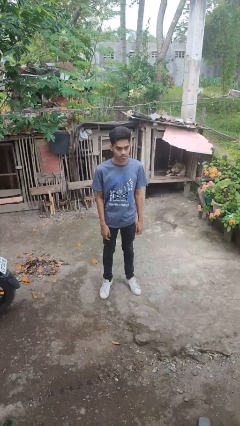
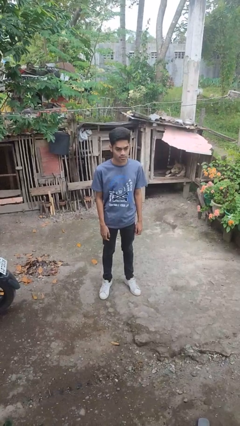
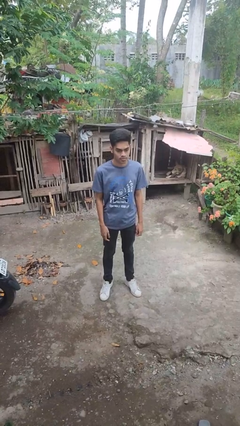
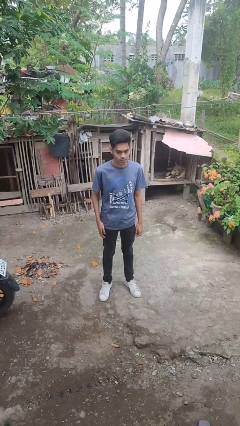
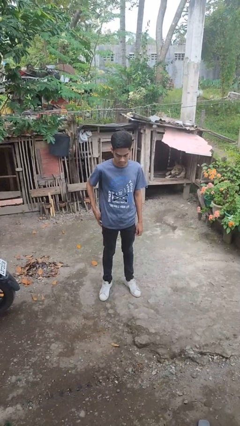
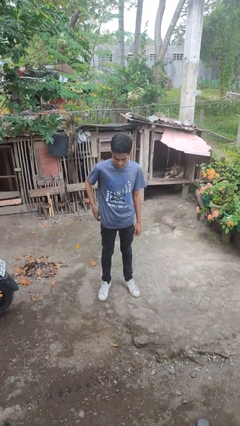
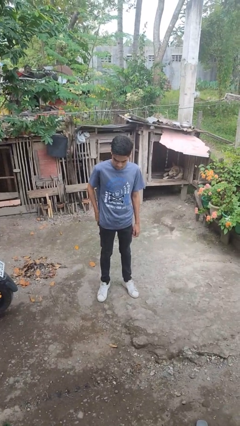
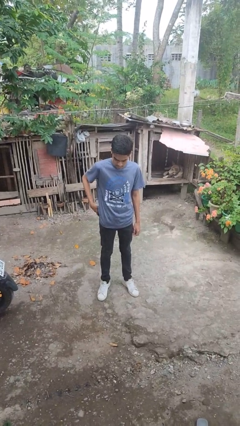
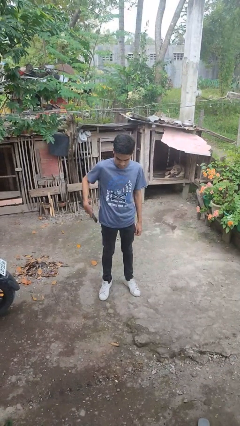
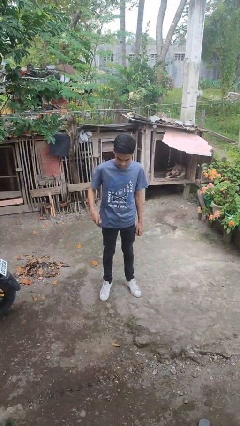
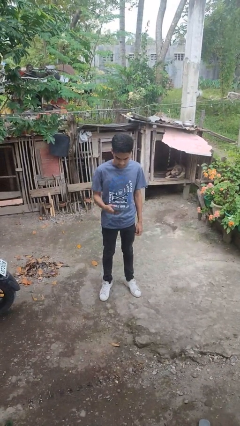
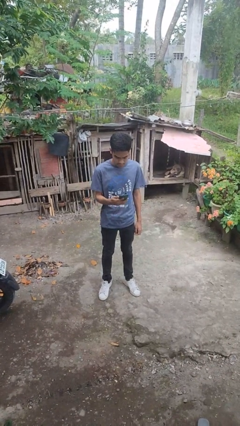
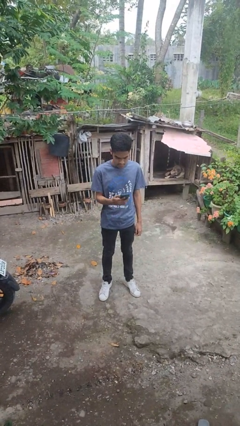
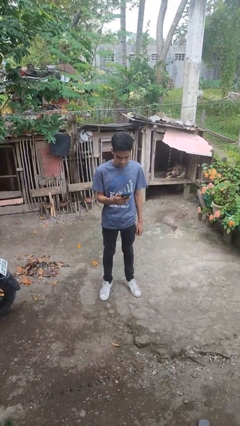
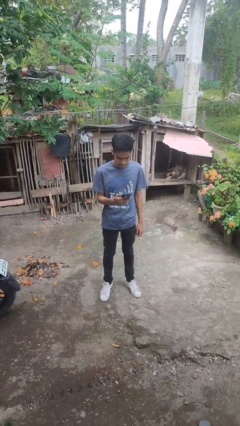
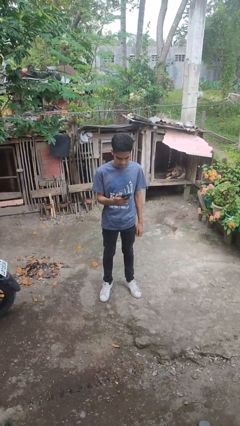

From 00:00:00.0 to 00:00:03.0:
person takes phone from pocket

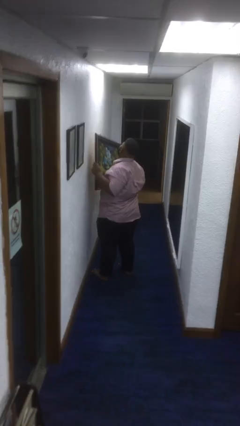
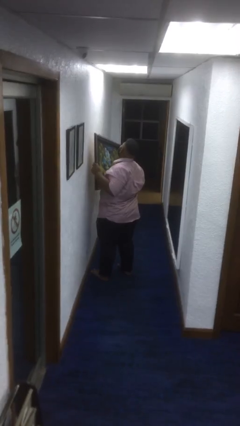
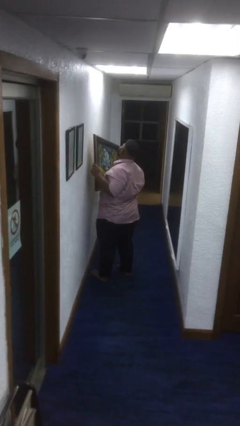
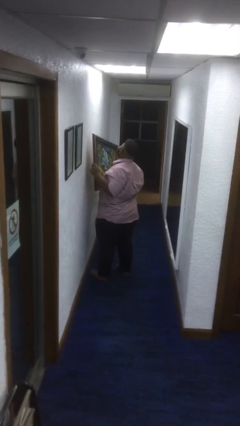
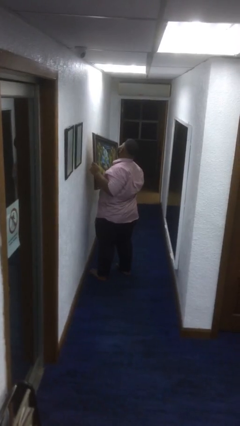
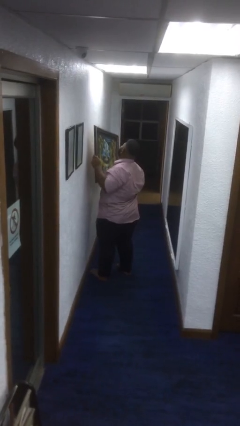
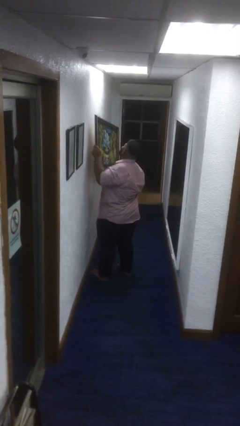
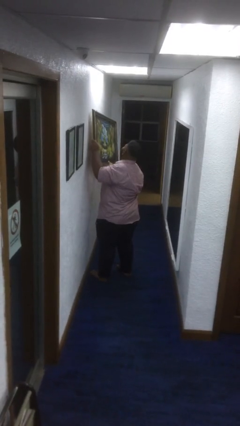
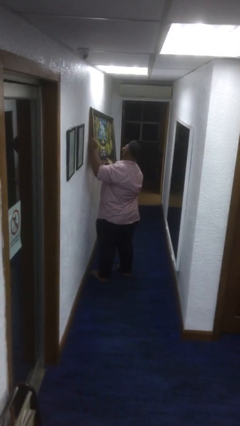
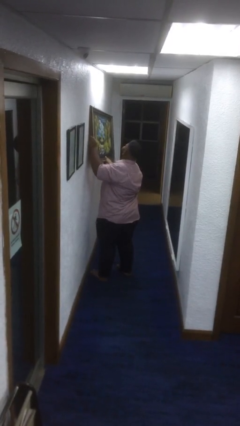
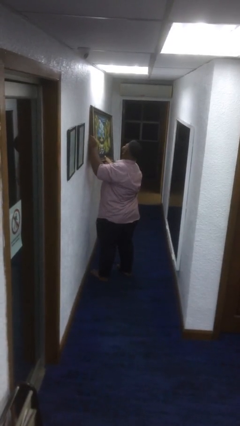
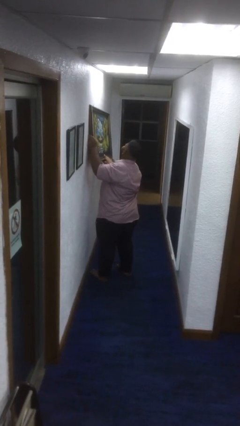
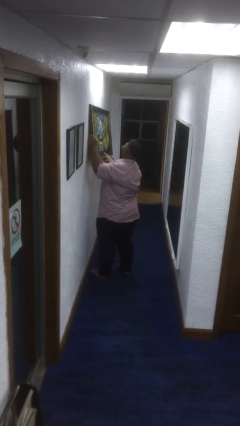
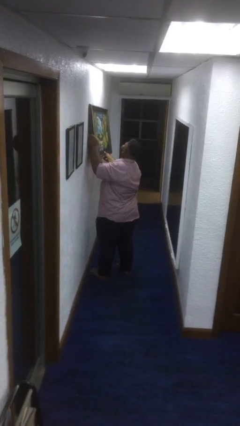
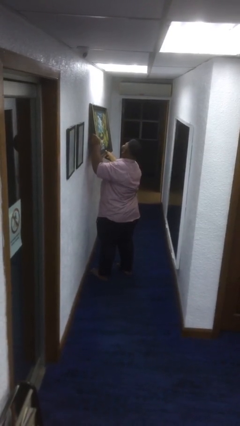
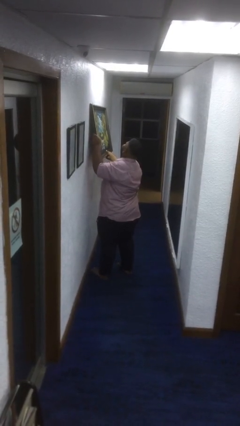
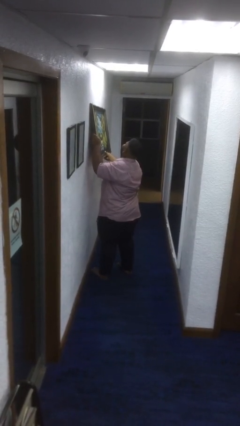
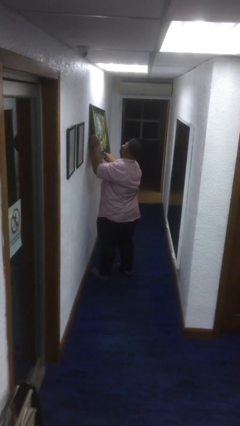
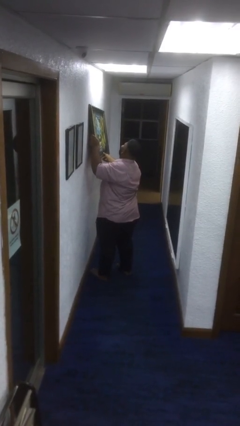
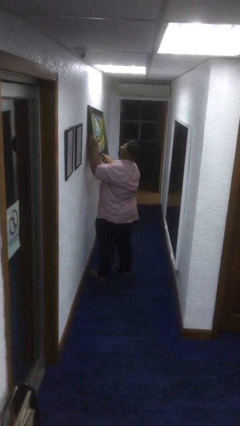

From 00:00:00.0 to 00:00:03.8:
person puts up picture frame

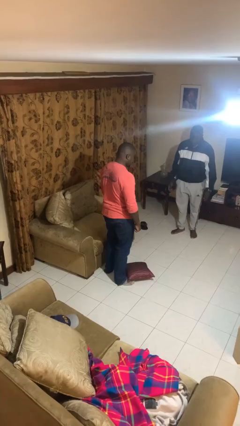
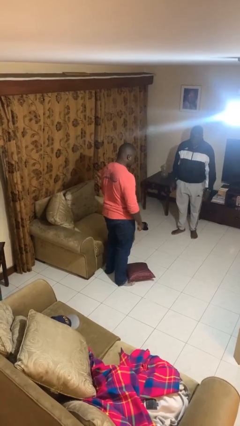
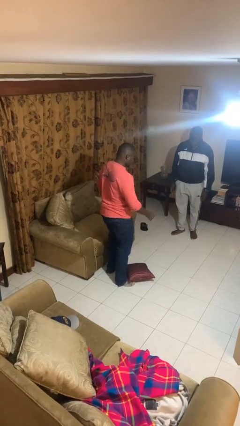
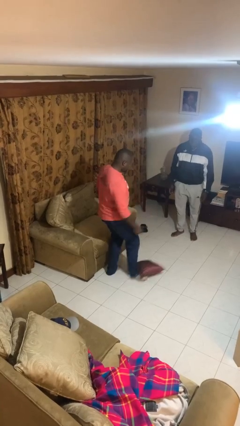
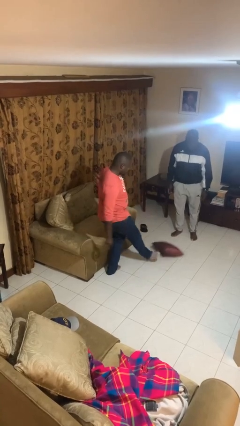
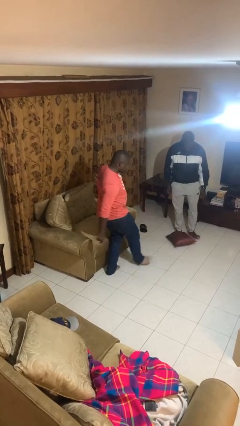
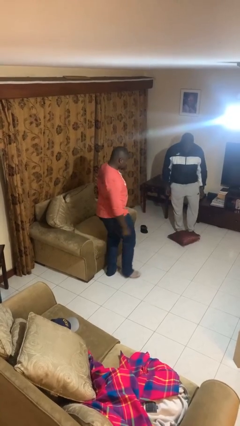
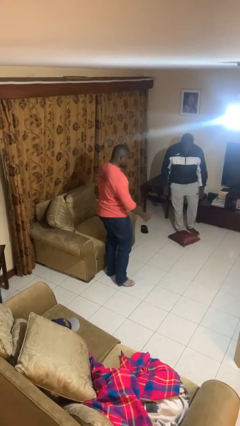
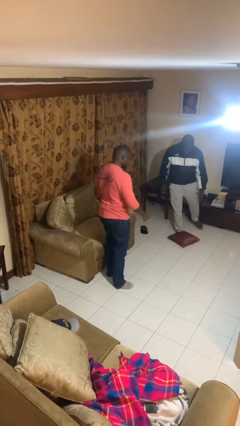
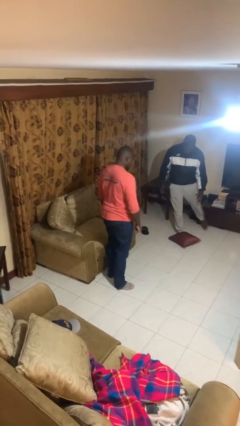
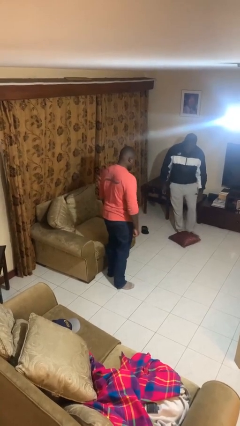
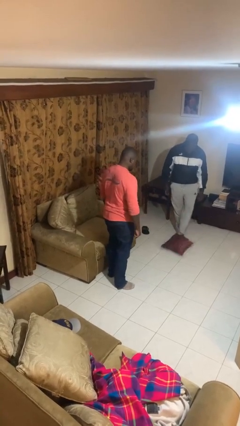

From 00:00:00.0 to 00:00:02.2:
person kicks object to person

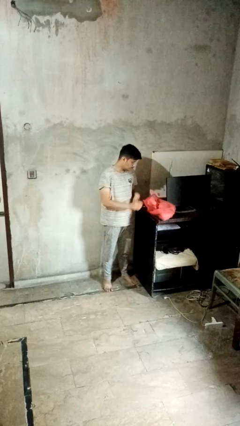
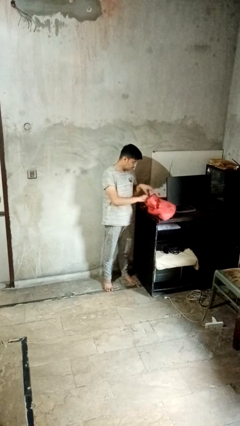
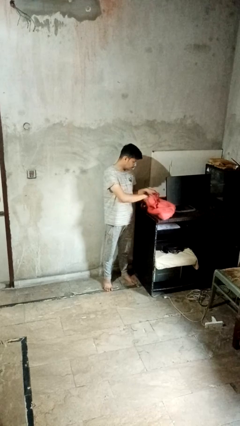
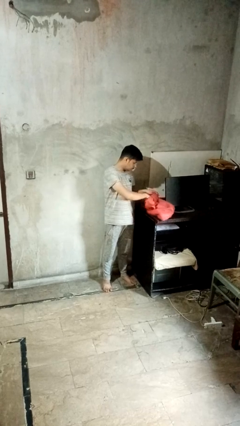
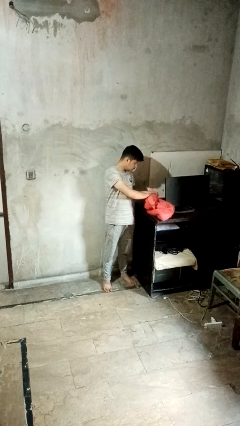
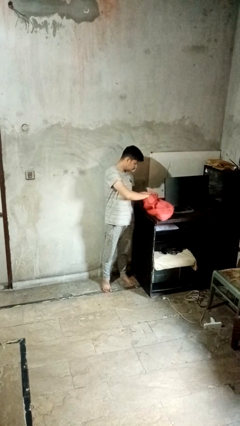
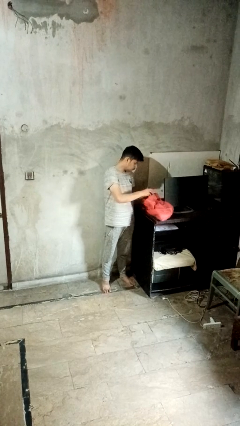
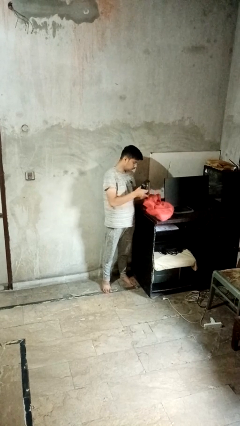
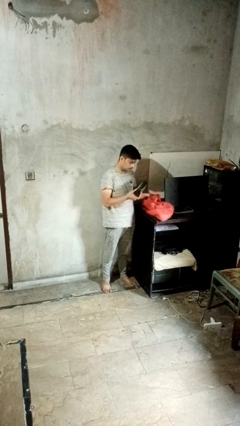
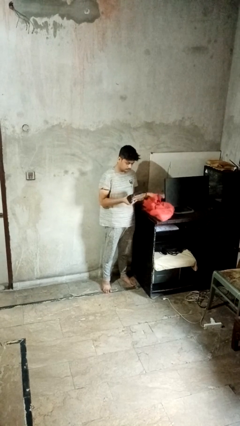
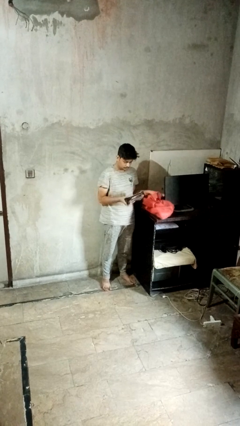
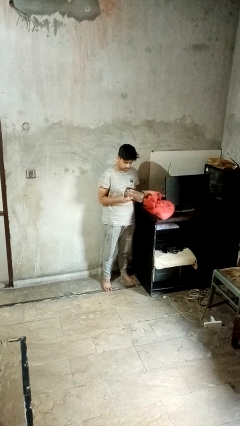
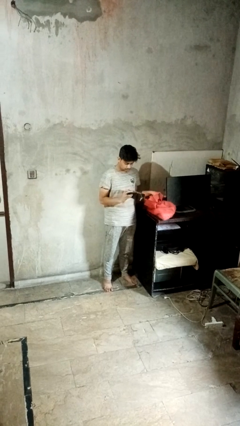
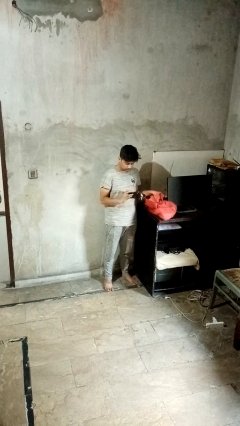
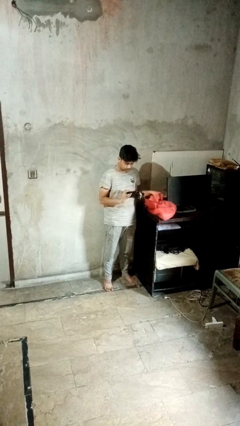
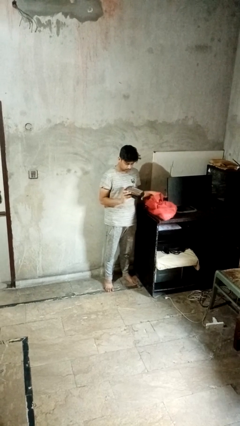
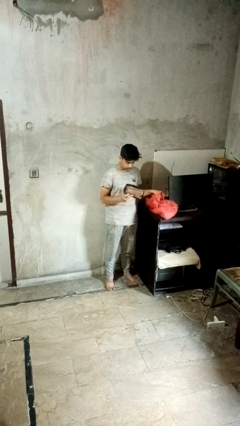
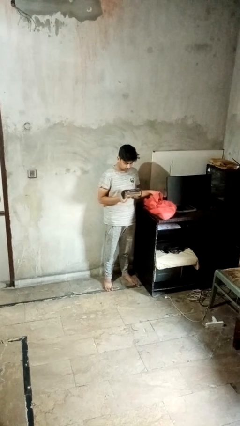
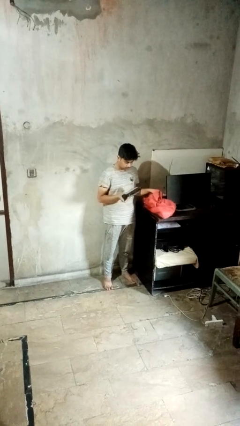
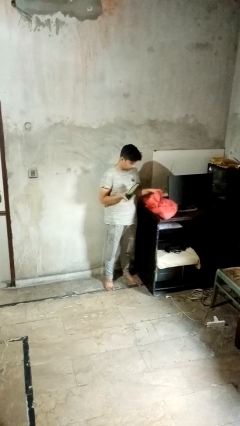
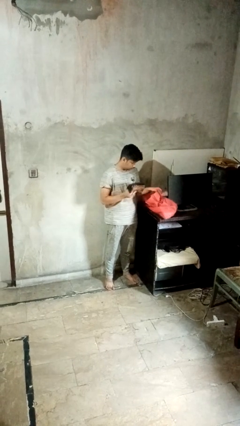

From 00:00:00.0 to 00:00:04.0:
person takes object from bag

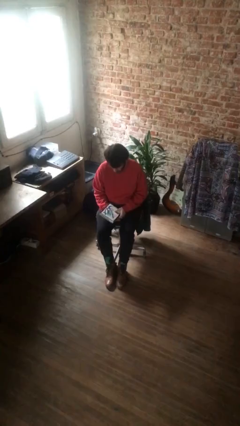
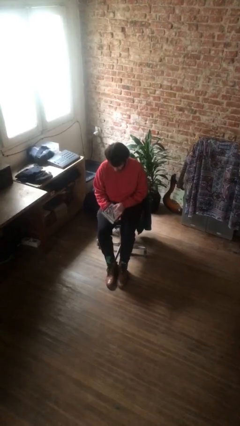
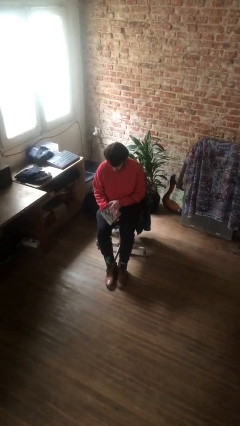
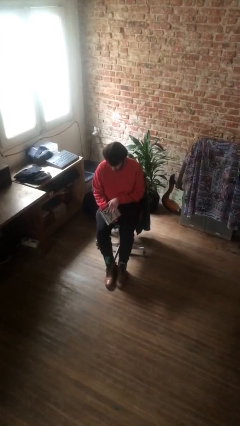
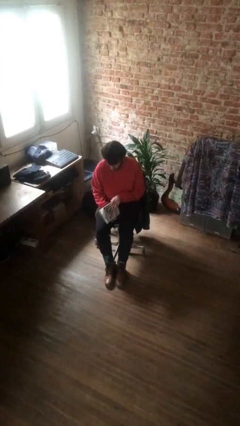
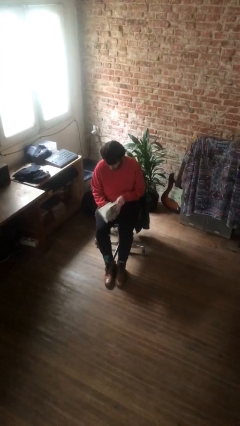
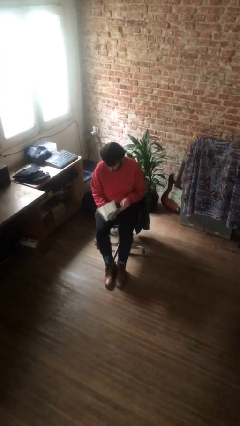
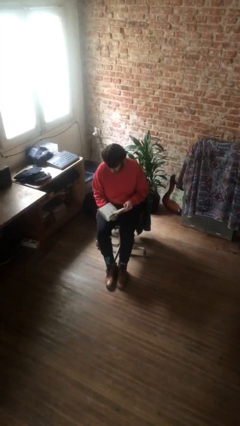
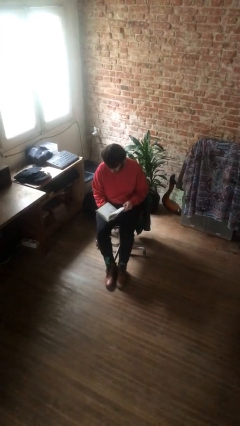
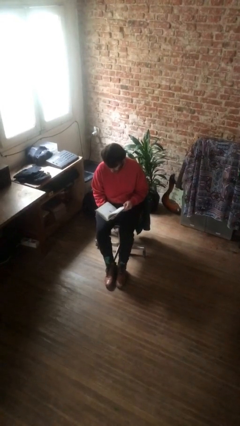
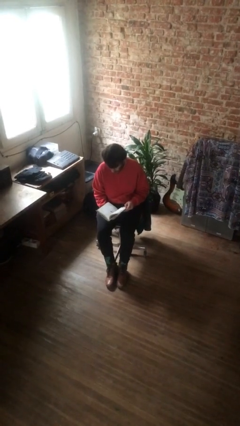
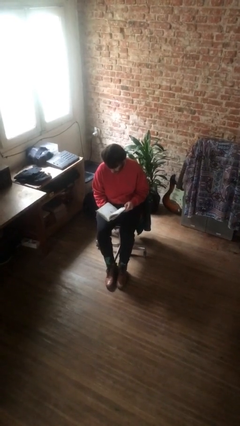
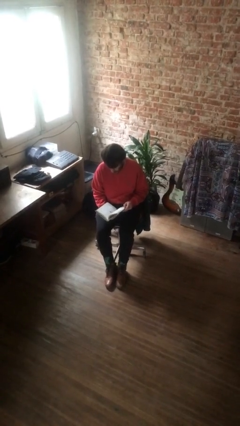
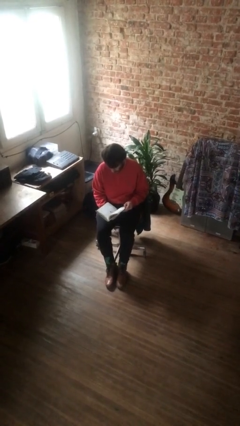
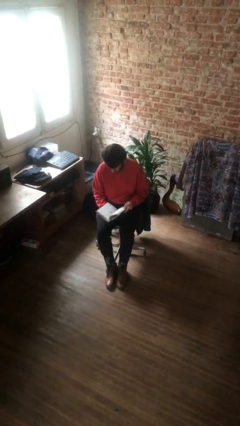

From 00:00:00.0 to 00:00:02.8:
person reads book

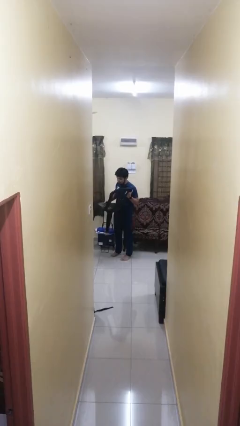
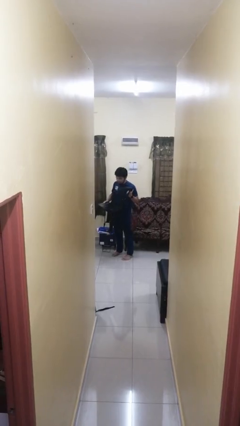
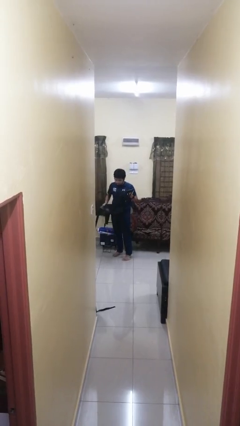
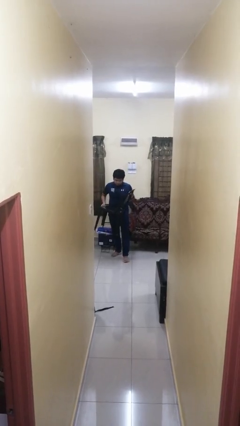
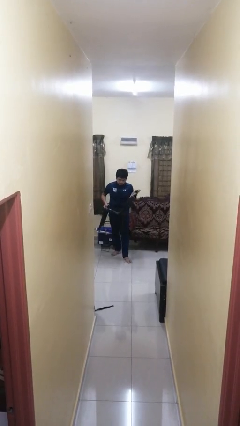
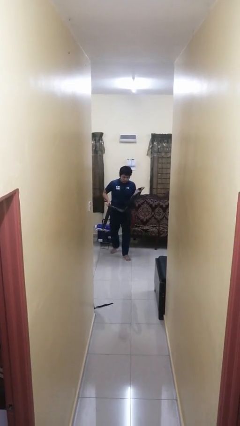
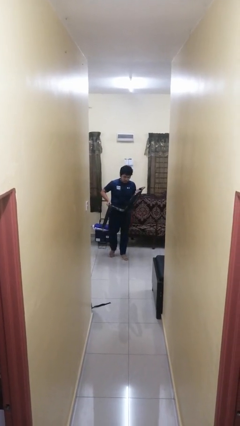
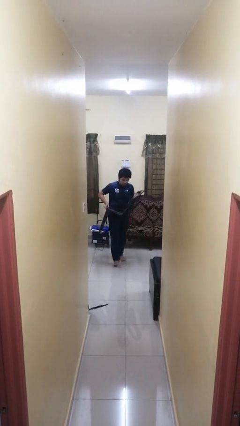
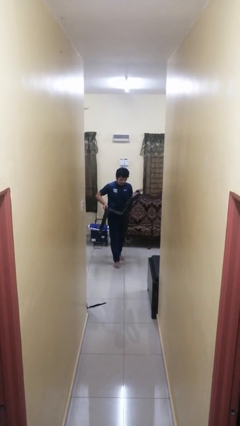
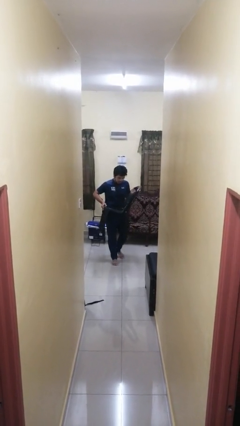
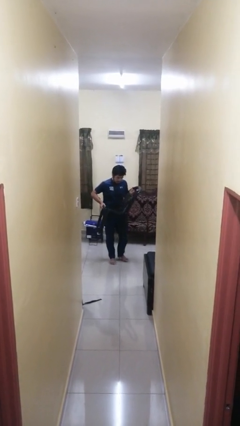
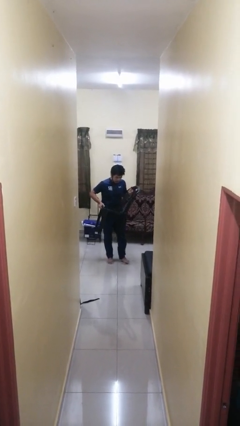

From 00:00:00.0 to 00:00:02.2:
person carries furniture
